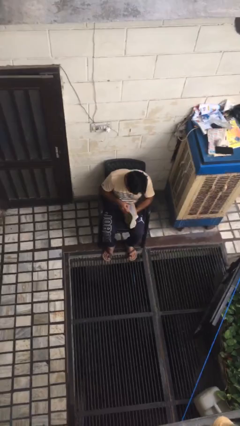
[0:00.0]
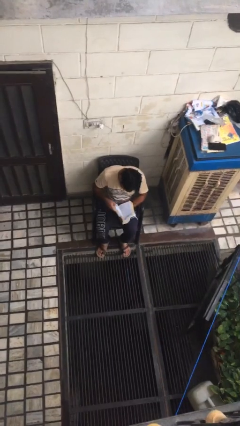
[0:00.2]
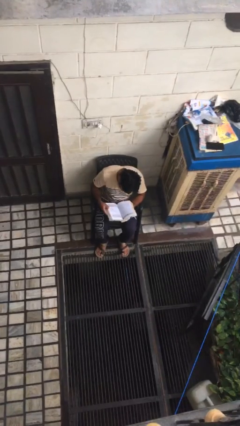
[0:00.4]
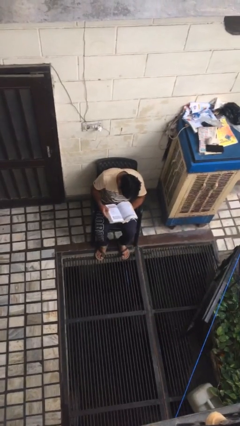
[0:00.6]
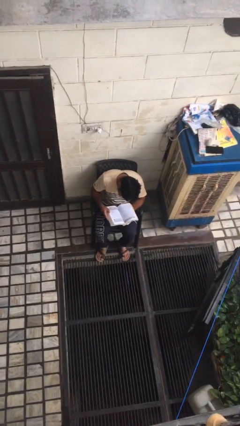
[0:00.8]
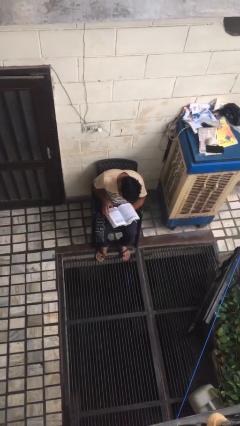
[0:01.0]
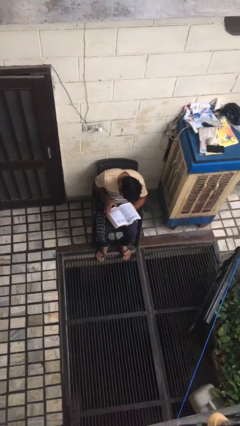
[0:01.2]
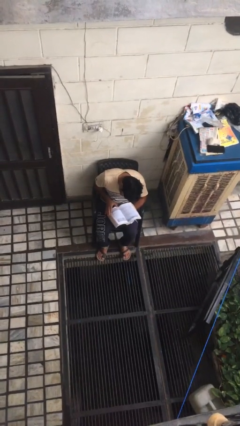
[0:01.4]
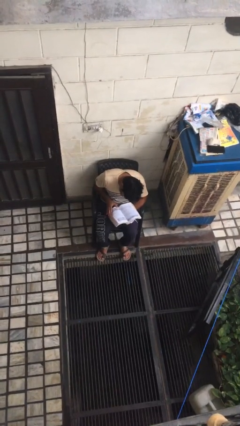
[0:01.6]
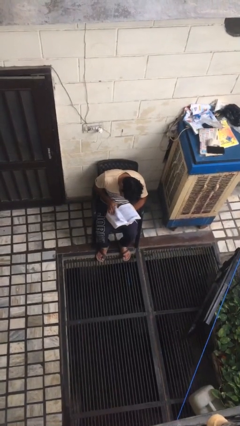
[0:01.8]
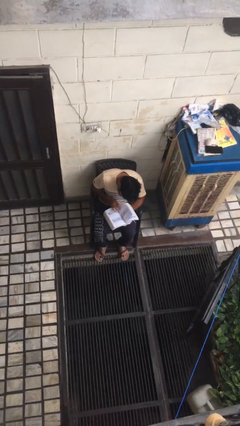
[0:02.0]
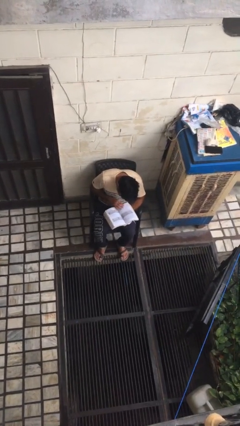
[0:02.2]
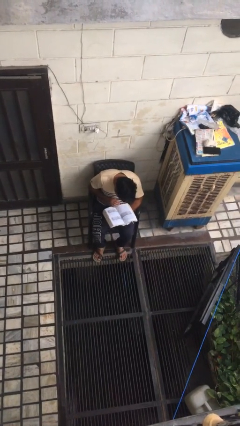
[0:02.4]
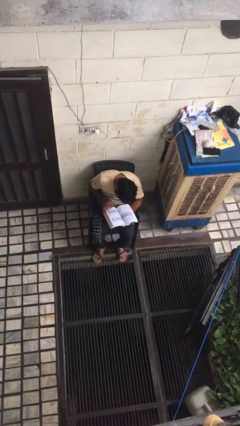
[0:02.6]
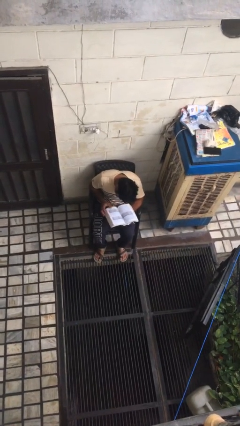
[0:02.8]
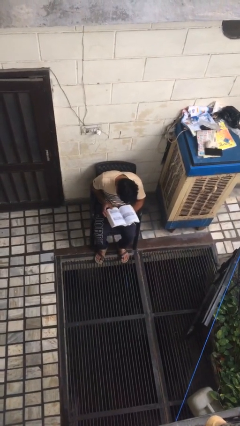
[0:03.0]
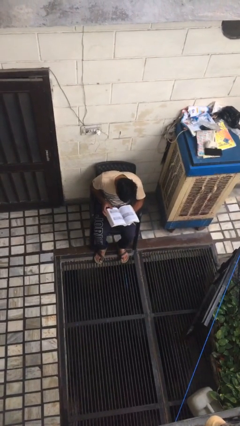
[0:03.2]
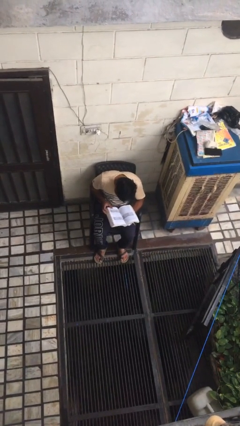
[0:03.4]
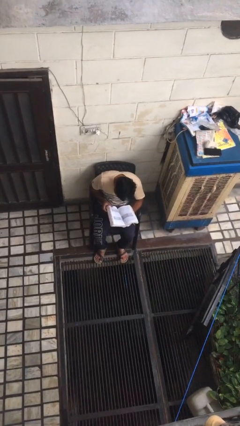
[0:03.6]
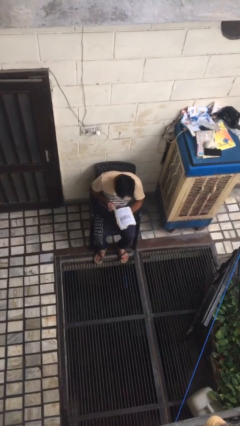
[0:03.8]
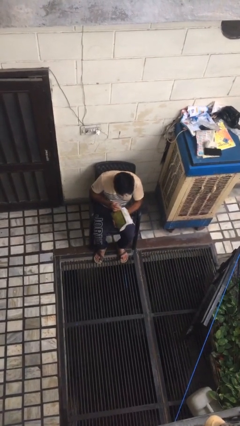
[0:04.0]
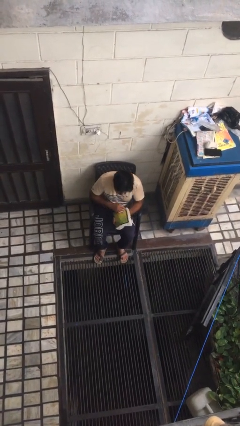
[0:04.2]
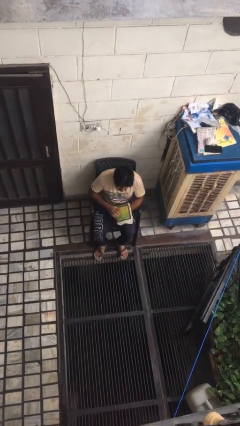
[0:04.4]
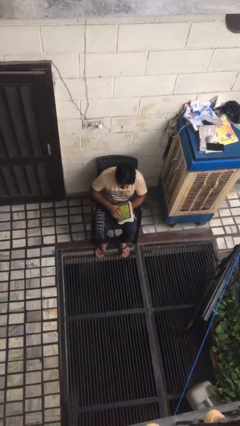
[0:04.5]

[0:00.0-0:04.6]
person reads book

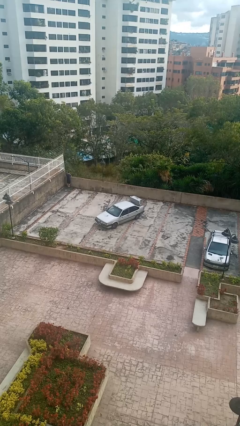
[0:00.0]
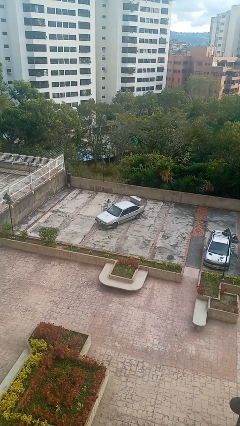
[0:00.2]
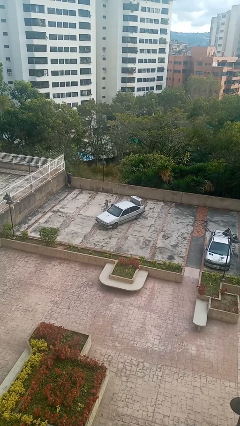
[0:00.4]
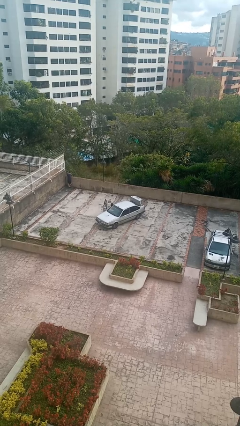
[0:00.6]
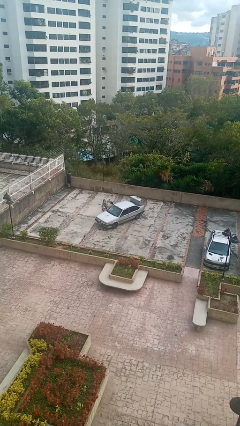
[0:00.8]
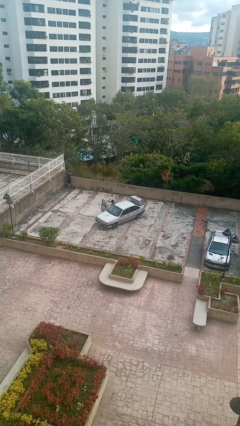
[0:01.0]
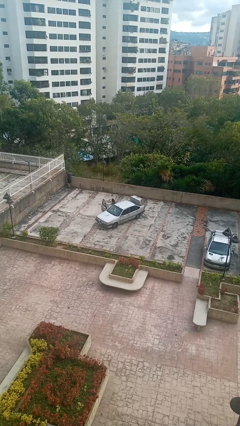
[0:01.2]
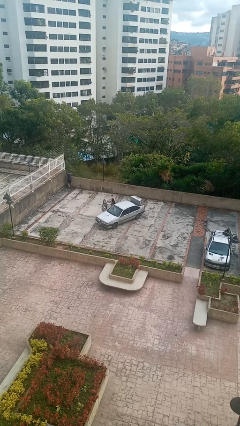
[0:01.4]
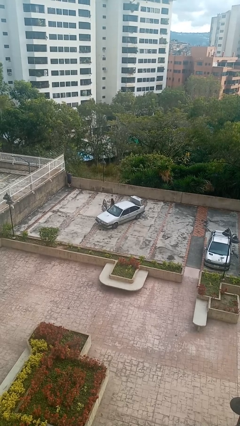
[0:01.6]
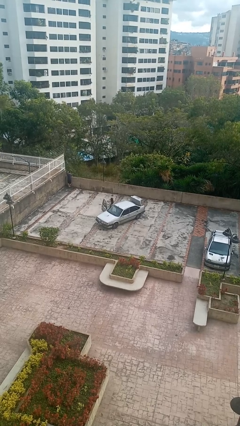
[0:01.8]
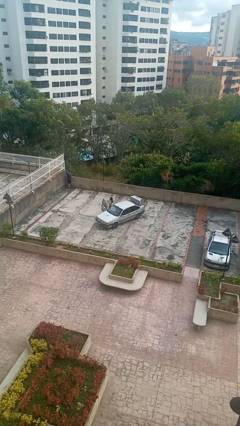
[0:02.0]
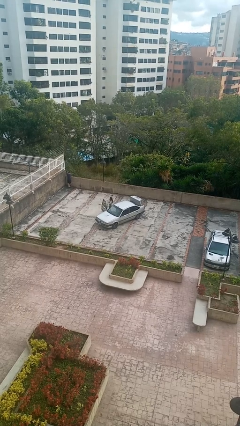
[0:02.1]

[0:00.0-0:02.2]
car drops off person

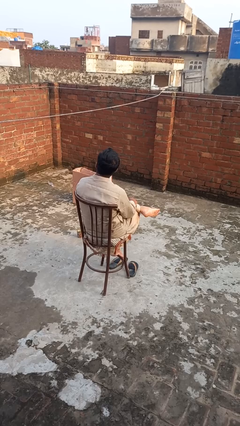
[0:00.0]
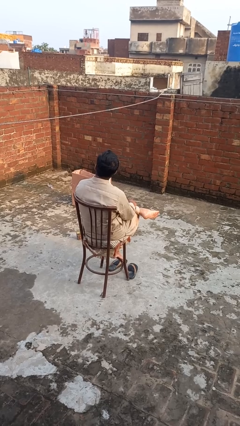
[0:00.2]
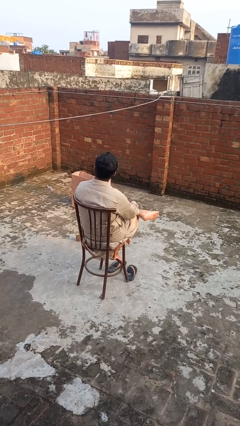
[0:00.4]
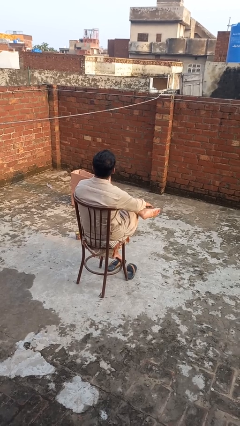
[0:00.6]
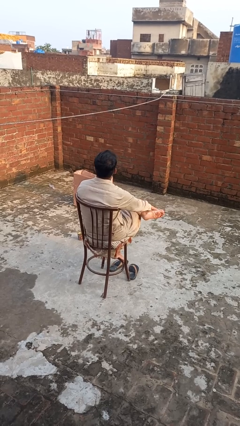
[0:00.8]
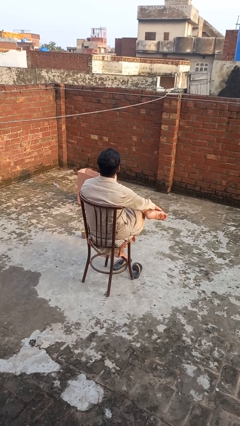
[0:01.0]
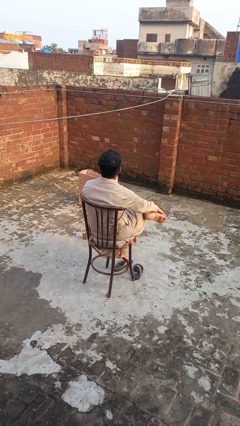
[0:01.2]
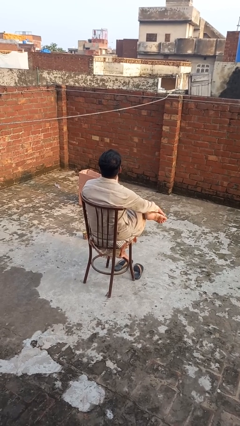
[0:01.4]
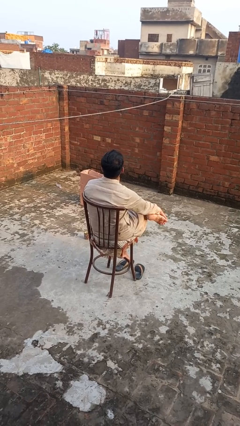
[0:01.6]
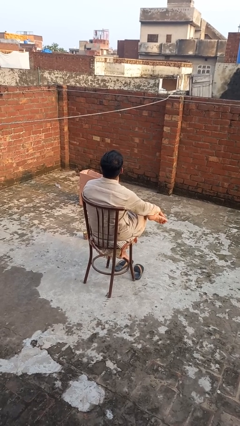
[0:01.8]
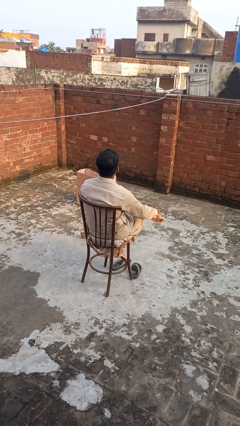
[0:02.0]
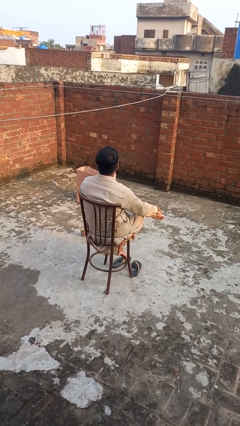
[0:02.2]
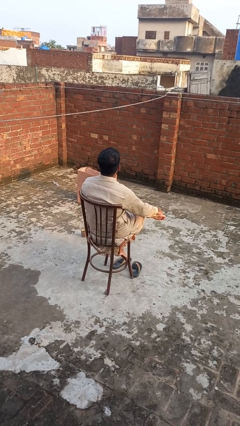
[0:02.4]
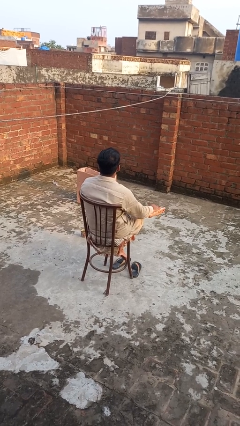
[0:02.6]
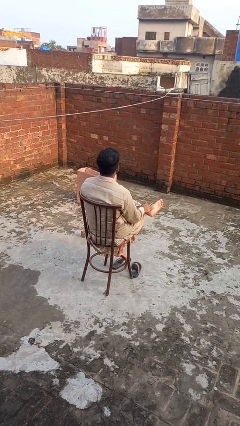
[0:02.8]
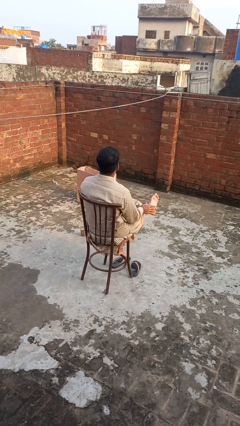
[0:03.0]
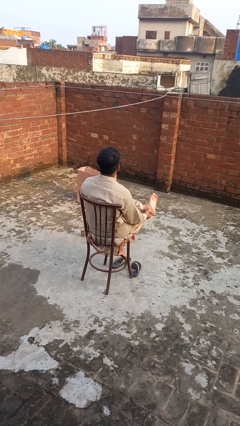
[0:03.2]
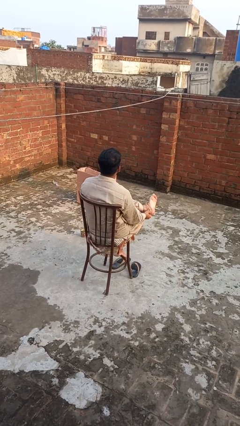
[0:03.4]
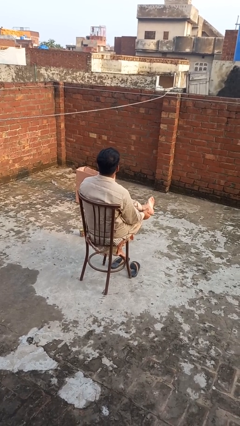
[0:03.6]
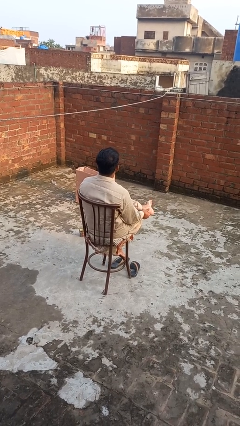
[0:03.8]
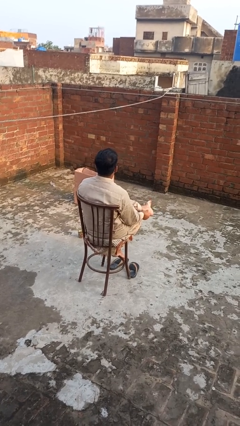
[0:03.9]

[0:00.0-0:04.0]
person rubs foot

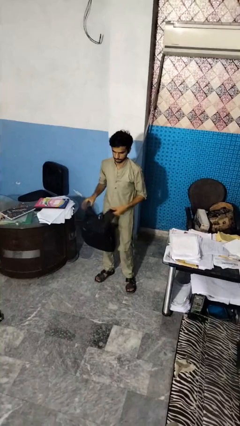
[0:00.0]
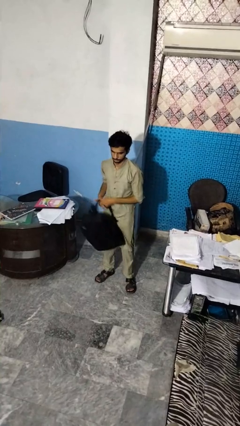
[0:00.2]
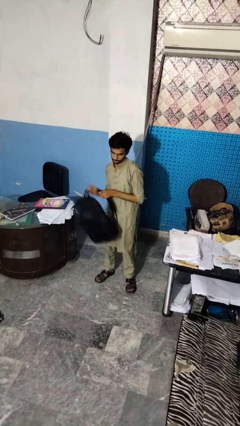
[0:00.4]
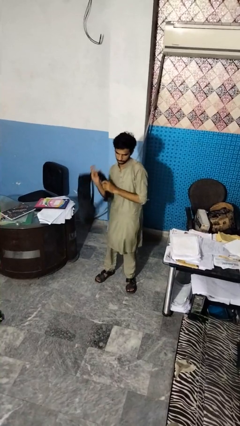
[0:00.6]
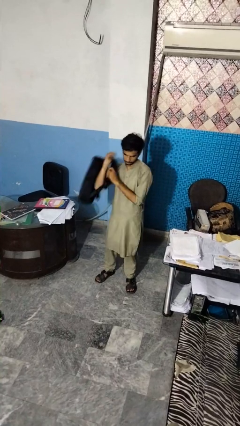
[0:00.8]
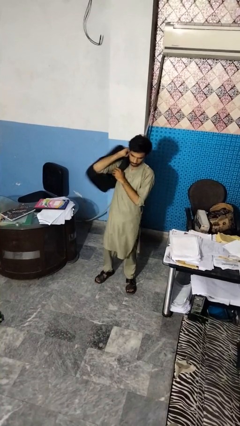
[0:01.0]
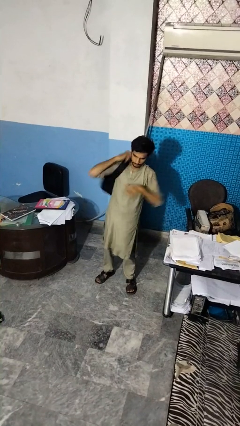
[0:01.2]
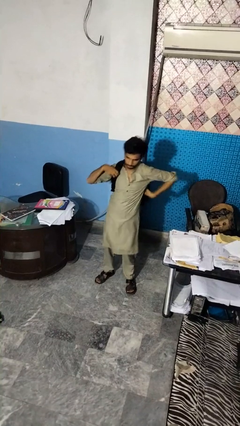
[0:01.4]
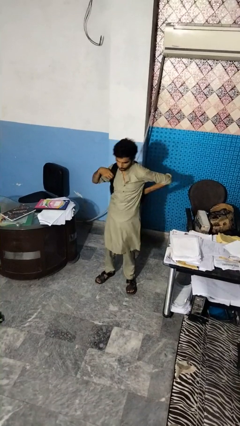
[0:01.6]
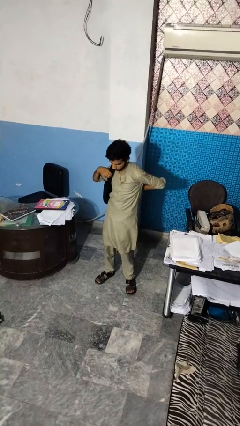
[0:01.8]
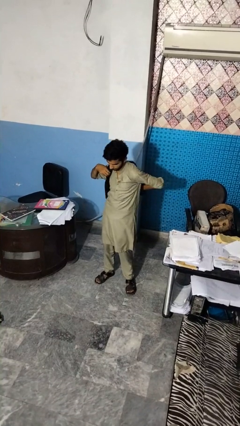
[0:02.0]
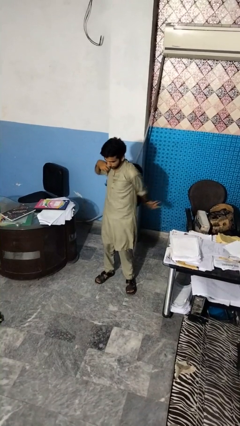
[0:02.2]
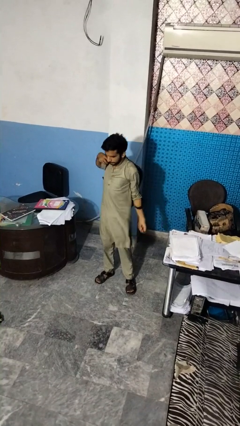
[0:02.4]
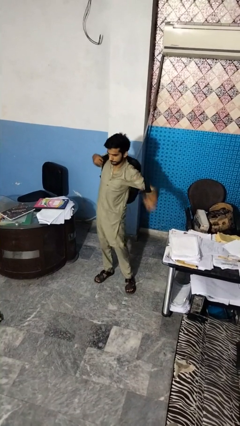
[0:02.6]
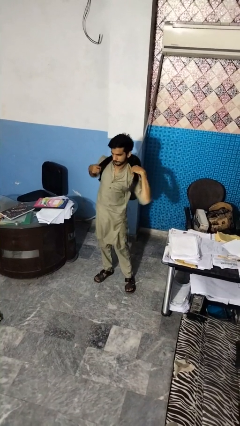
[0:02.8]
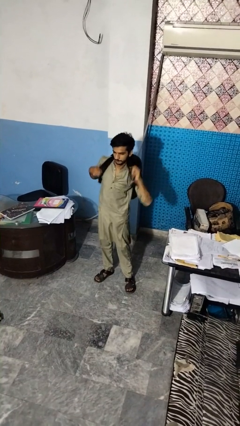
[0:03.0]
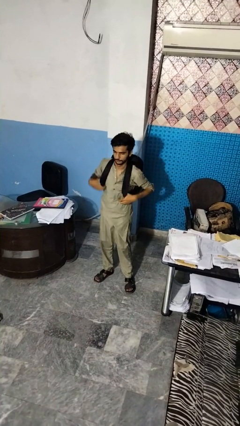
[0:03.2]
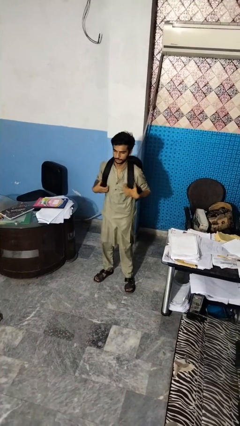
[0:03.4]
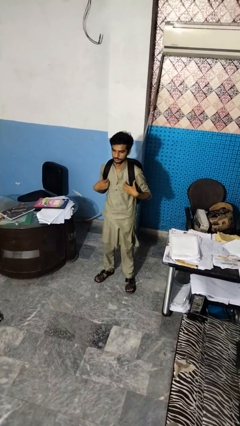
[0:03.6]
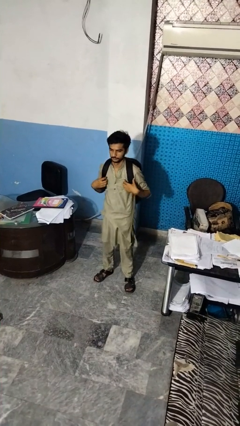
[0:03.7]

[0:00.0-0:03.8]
person puts on backpack

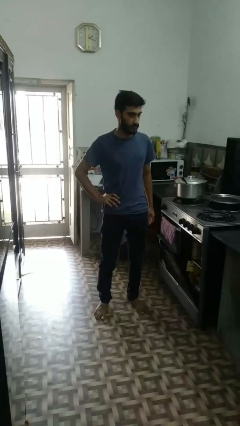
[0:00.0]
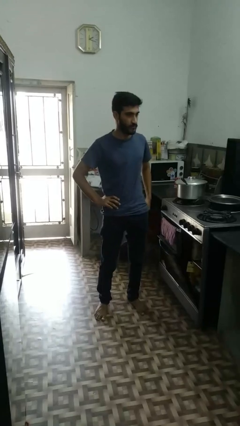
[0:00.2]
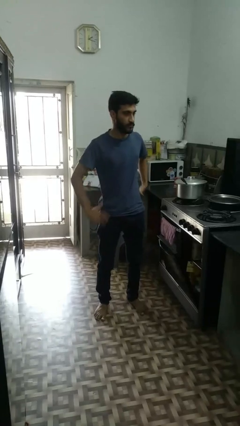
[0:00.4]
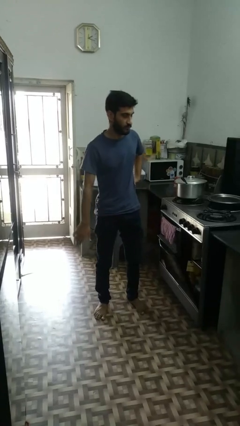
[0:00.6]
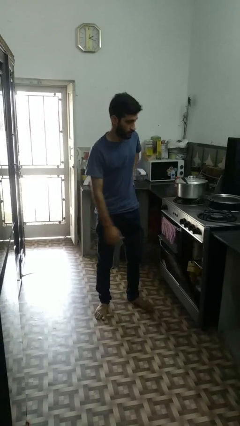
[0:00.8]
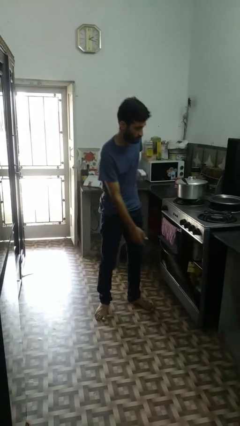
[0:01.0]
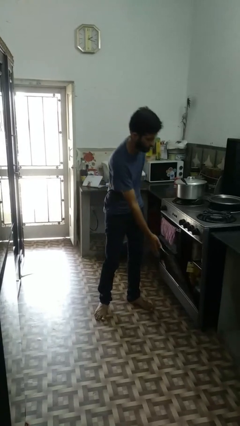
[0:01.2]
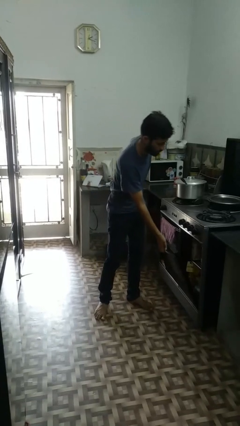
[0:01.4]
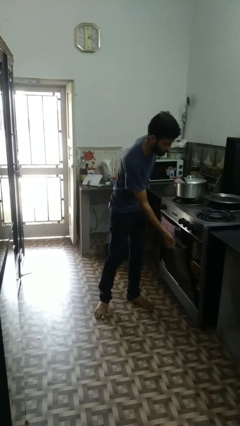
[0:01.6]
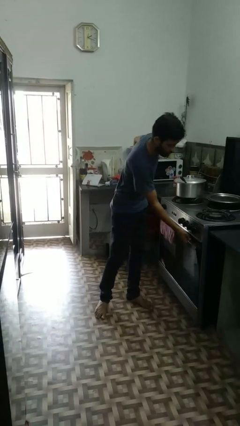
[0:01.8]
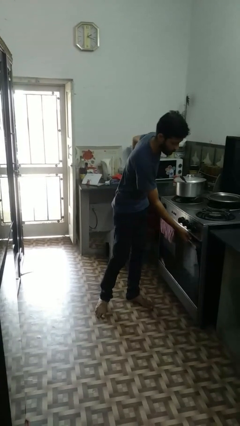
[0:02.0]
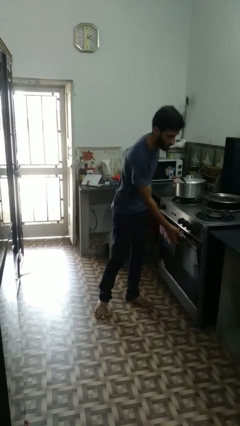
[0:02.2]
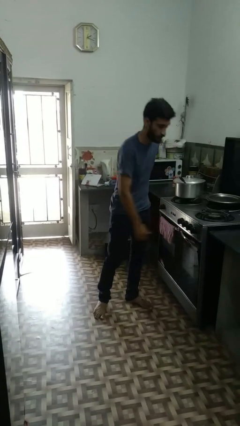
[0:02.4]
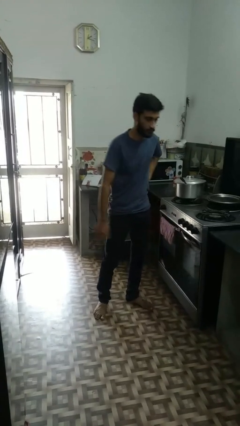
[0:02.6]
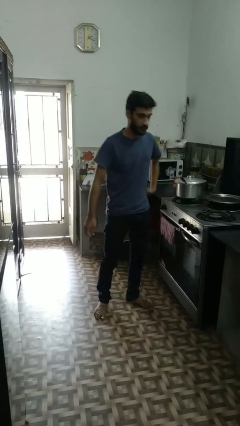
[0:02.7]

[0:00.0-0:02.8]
person closes dishwasher

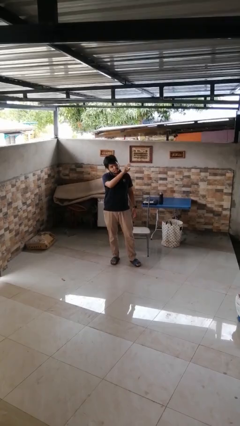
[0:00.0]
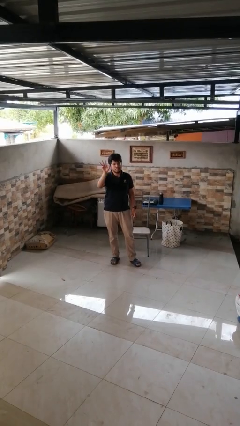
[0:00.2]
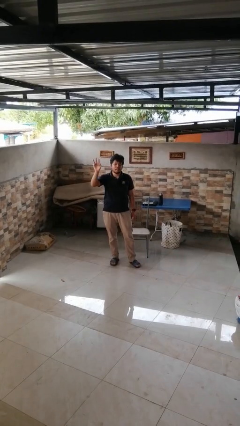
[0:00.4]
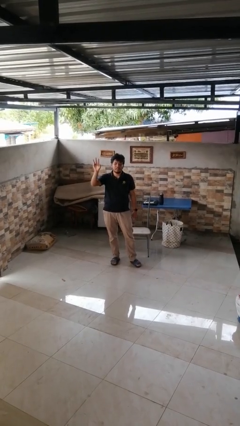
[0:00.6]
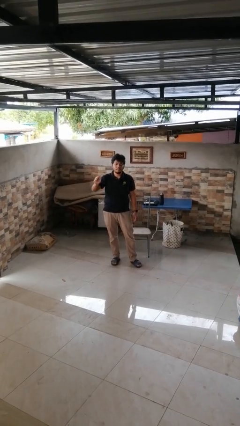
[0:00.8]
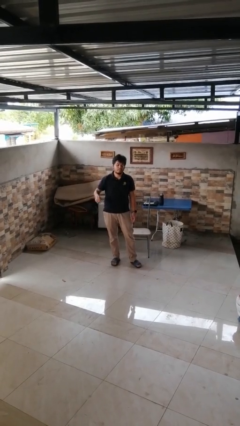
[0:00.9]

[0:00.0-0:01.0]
person gestures swipe right
